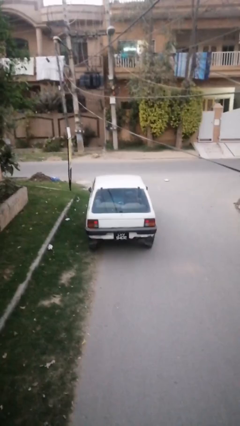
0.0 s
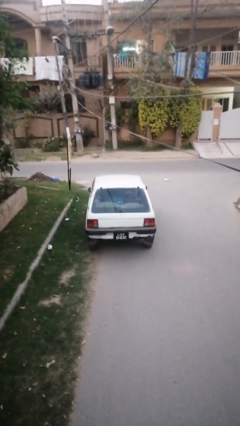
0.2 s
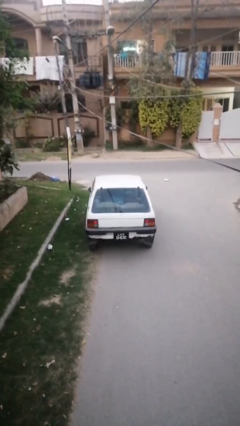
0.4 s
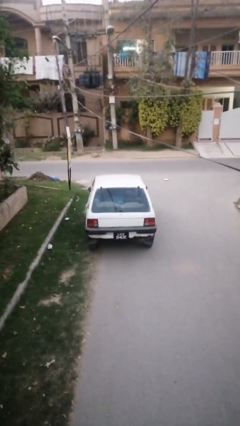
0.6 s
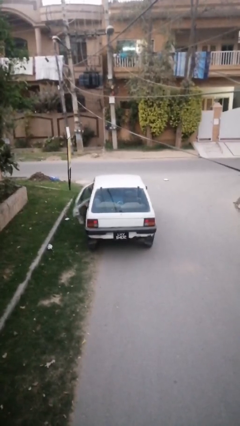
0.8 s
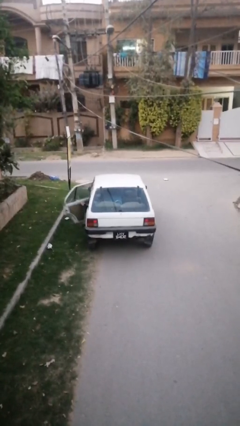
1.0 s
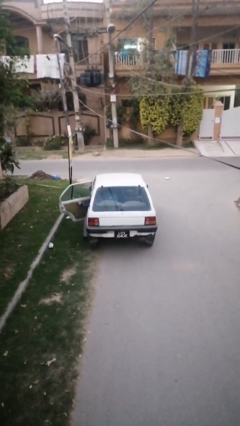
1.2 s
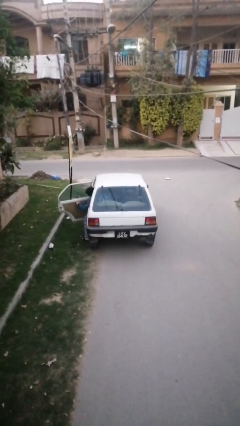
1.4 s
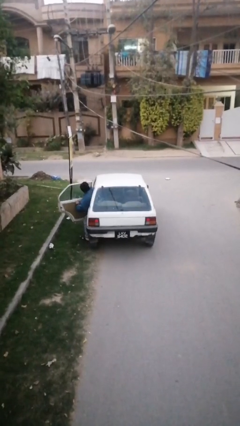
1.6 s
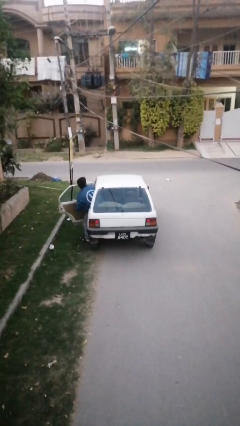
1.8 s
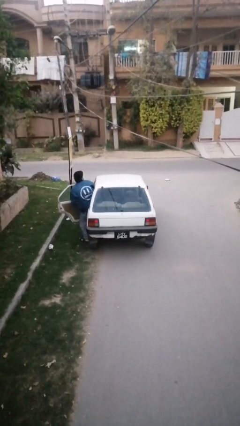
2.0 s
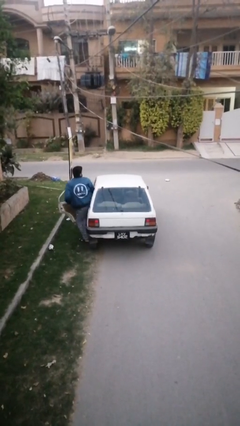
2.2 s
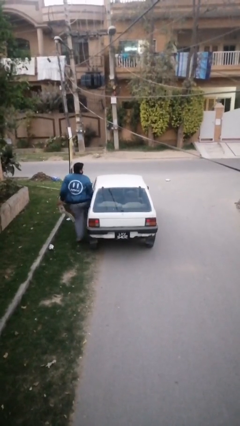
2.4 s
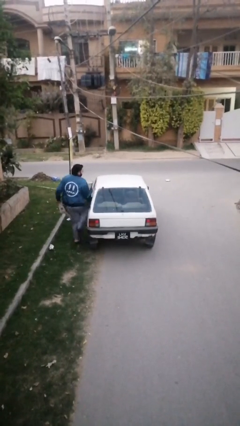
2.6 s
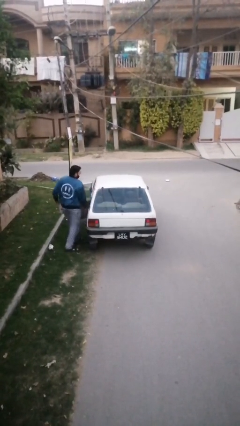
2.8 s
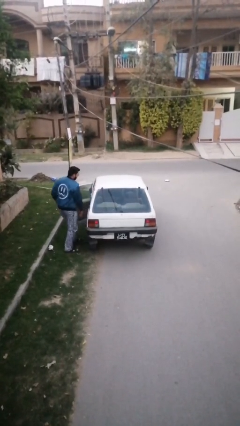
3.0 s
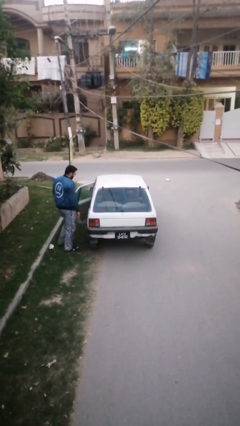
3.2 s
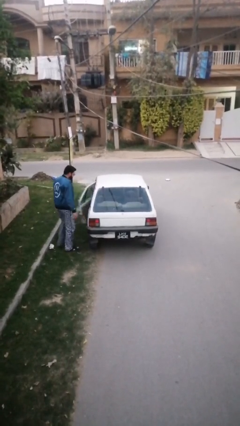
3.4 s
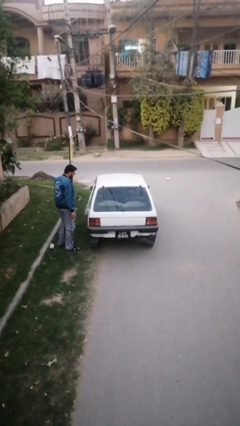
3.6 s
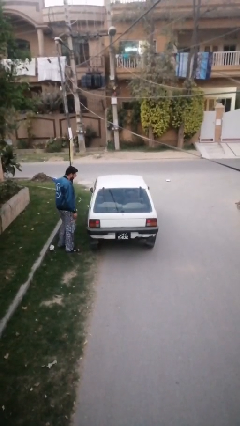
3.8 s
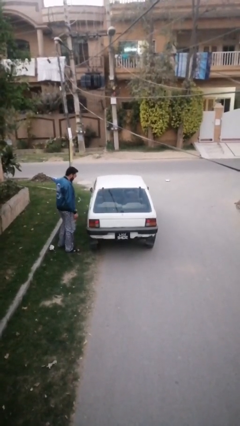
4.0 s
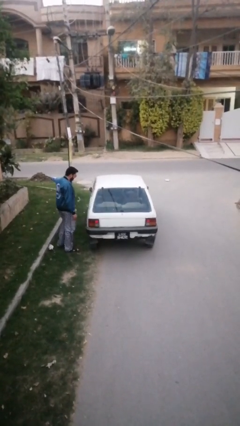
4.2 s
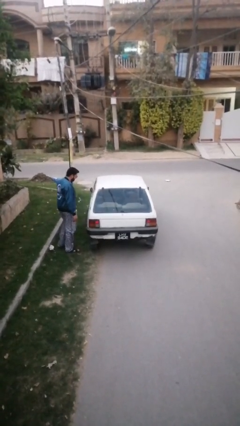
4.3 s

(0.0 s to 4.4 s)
car drops off person

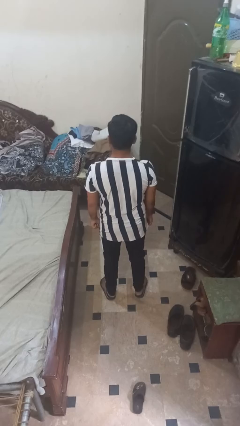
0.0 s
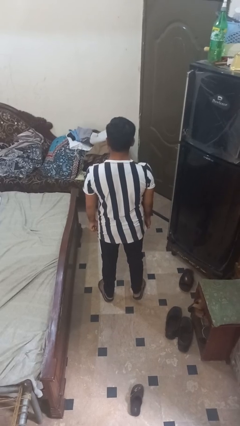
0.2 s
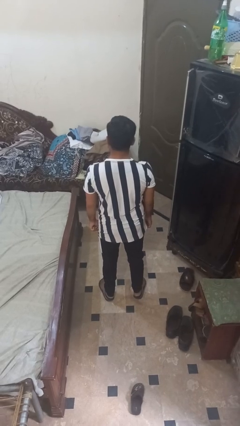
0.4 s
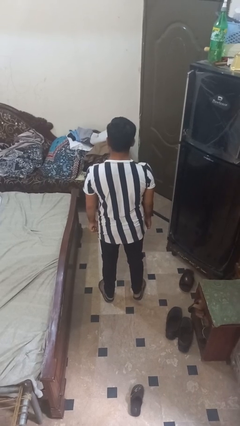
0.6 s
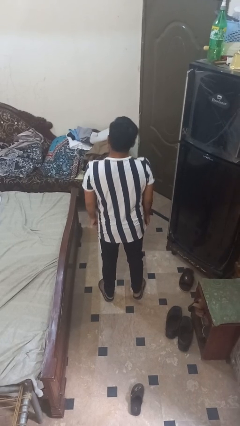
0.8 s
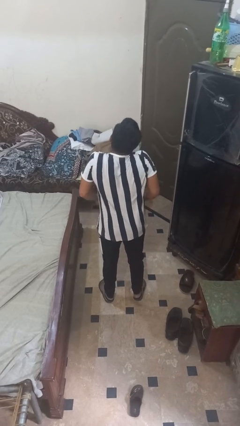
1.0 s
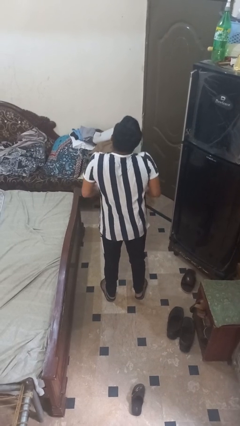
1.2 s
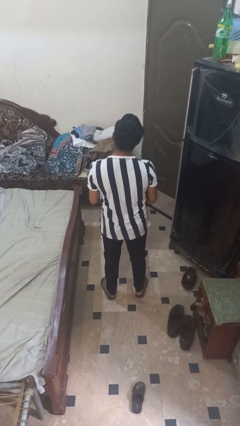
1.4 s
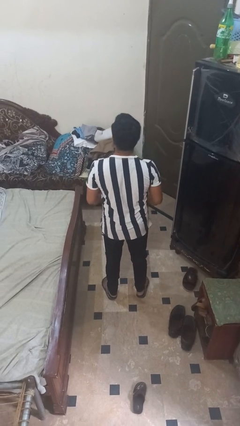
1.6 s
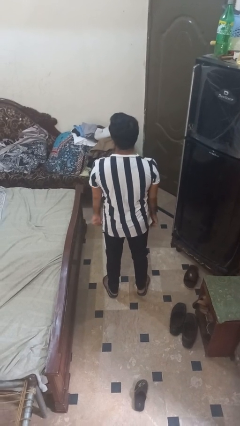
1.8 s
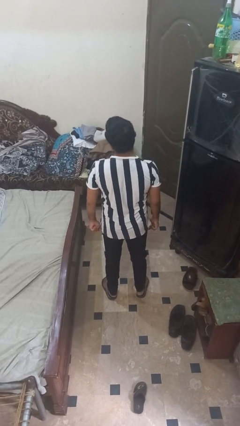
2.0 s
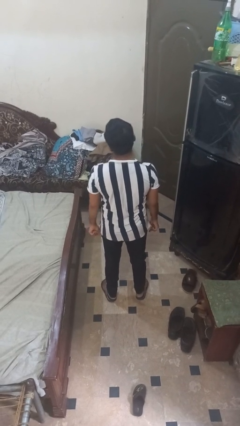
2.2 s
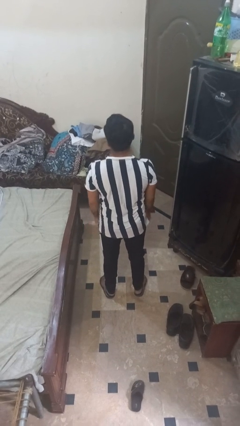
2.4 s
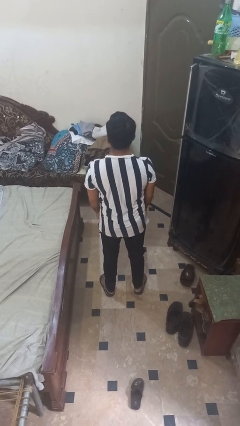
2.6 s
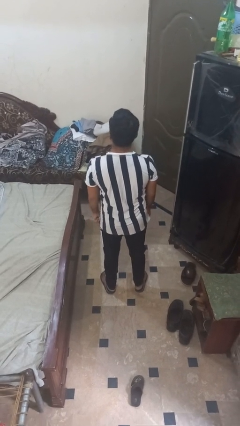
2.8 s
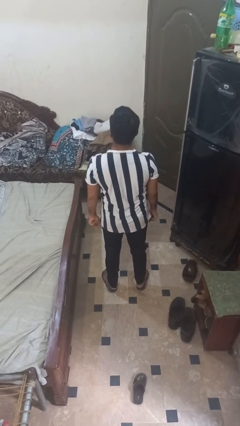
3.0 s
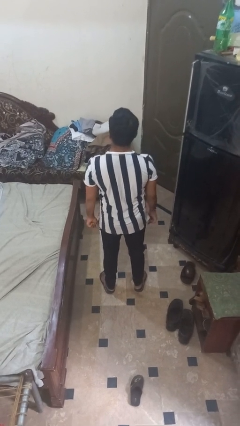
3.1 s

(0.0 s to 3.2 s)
person shrugs

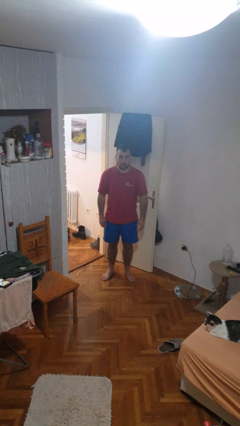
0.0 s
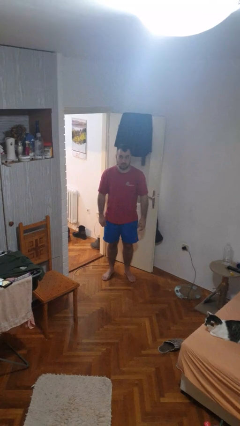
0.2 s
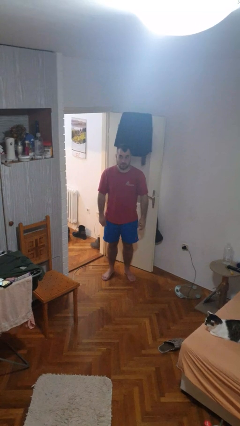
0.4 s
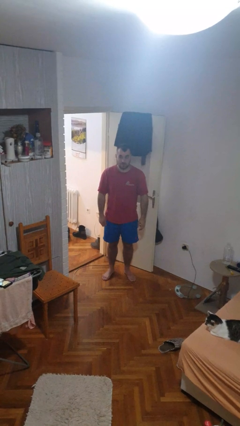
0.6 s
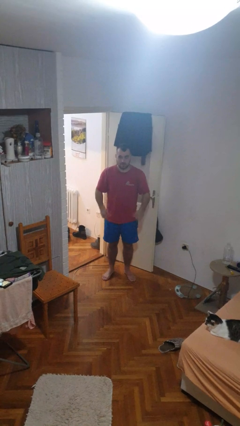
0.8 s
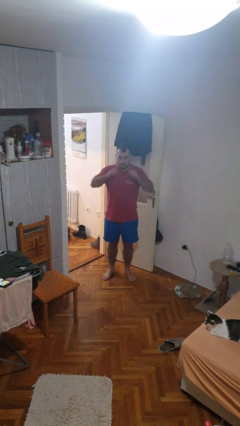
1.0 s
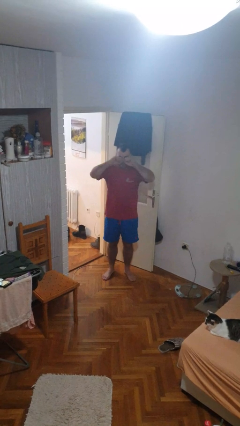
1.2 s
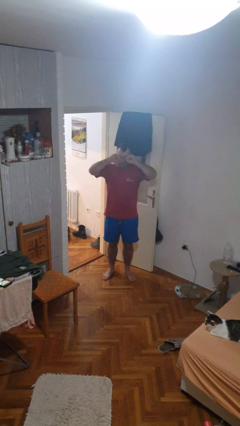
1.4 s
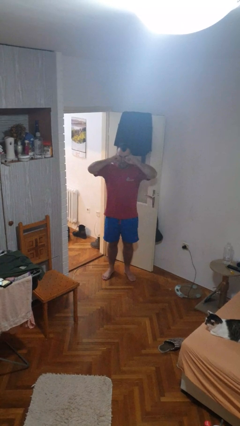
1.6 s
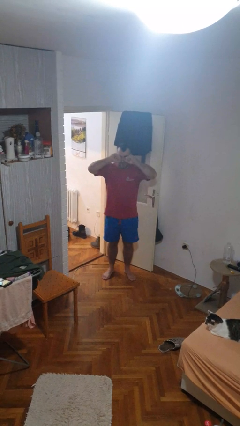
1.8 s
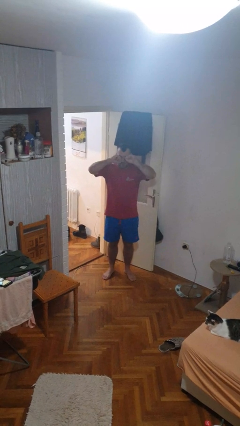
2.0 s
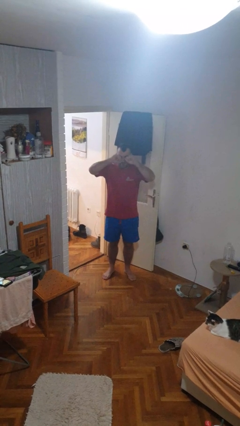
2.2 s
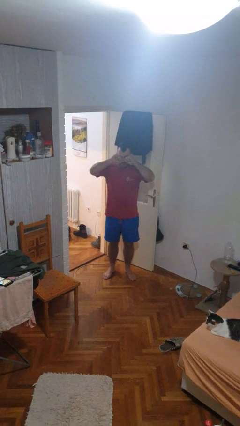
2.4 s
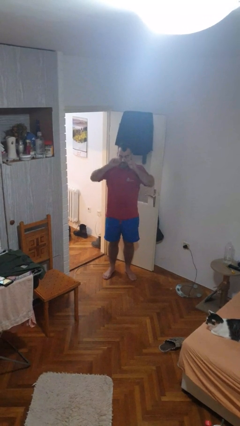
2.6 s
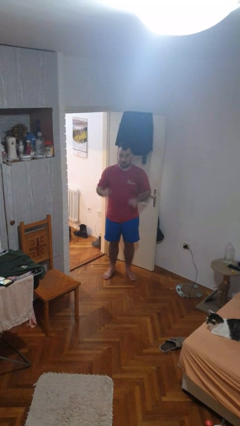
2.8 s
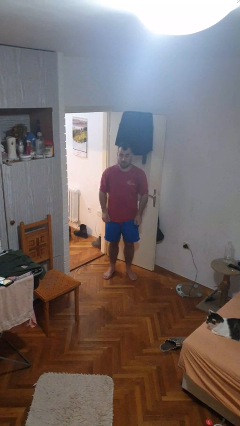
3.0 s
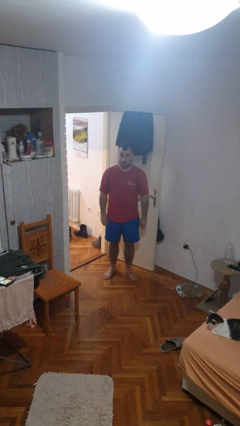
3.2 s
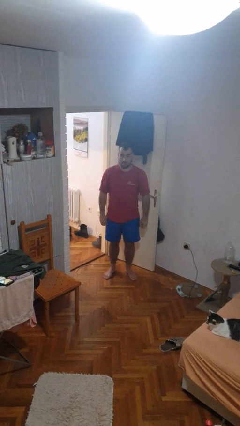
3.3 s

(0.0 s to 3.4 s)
person rubs eyes

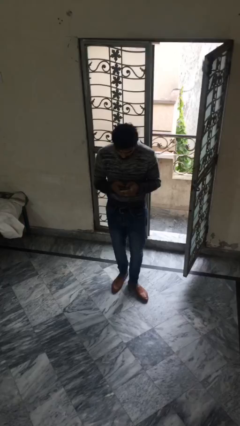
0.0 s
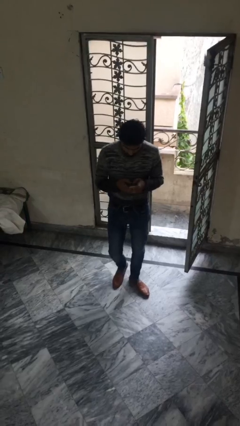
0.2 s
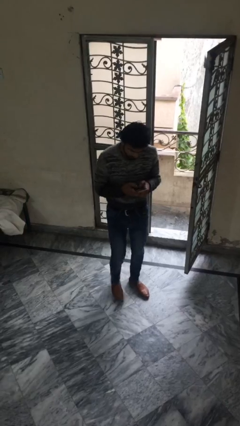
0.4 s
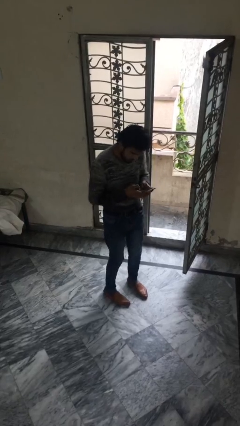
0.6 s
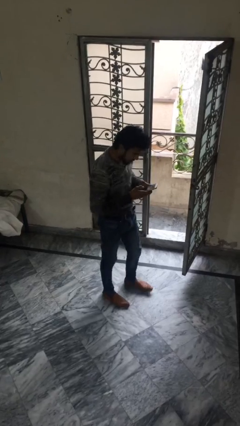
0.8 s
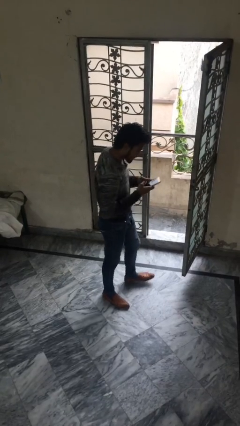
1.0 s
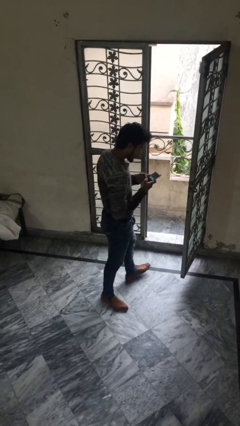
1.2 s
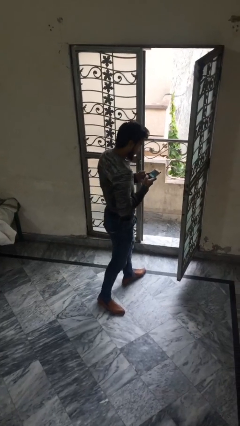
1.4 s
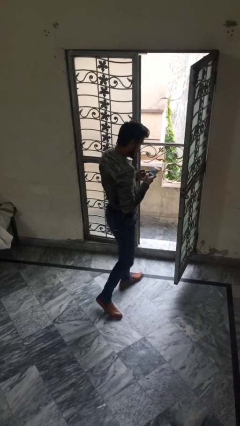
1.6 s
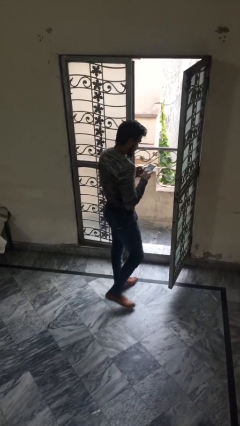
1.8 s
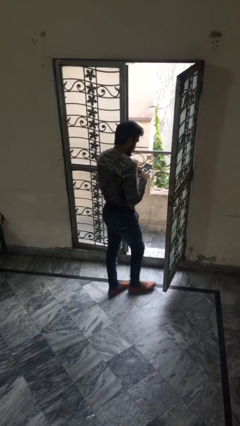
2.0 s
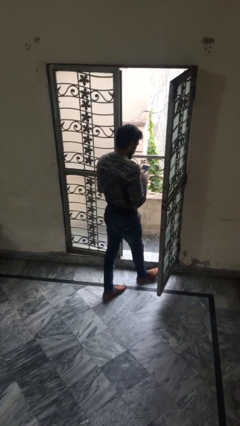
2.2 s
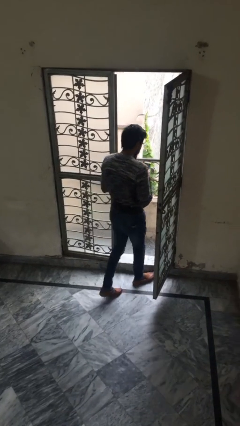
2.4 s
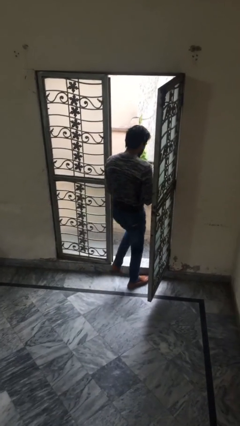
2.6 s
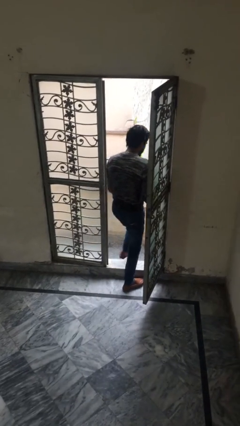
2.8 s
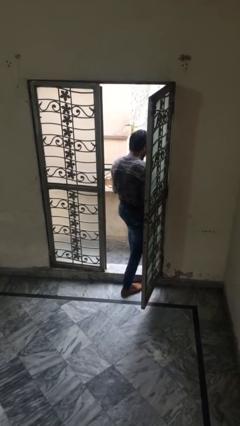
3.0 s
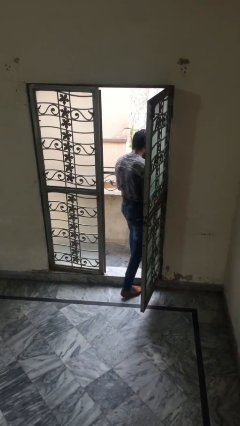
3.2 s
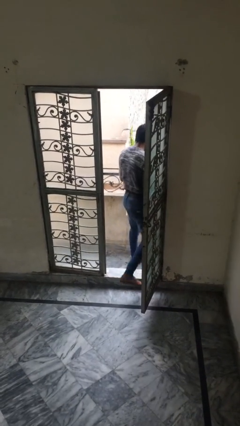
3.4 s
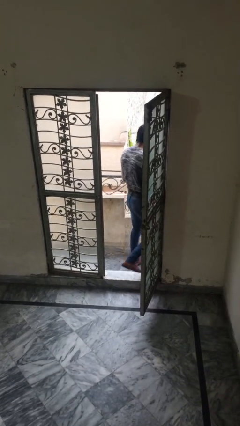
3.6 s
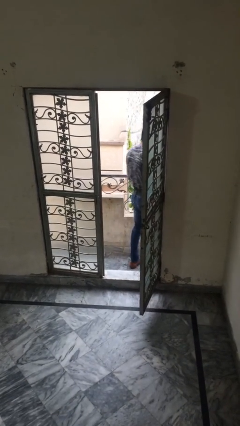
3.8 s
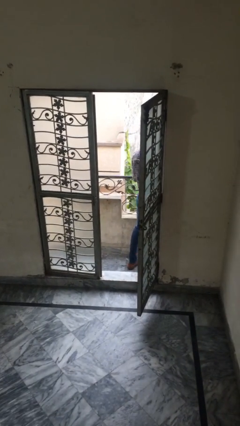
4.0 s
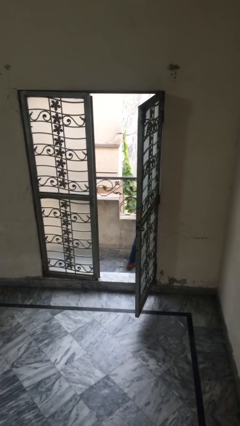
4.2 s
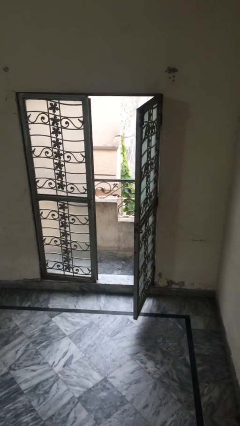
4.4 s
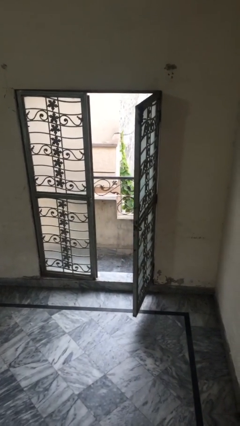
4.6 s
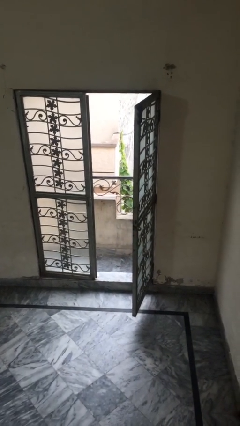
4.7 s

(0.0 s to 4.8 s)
person exits scene through structure

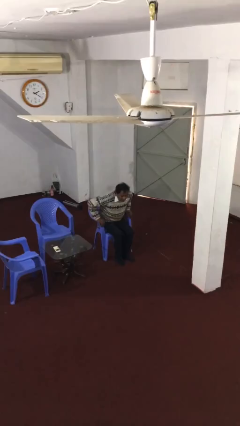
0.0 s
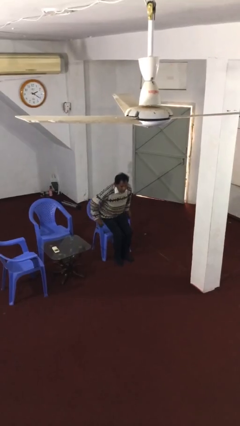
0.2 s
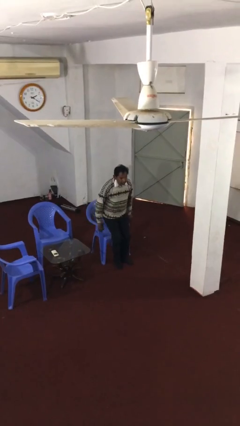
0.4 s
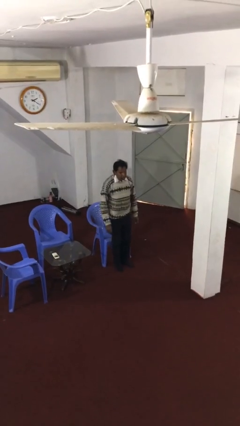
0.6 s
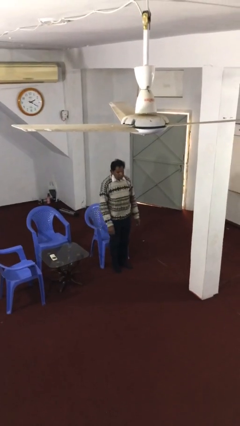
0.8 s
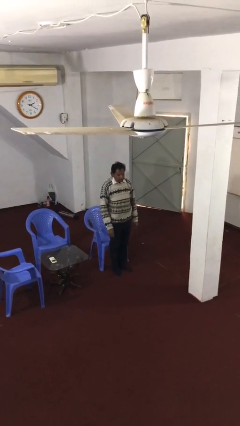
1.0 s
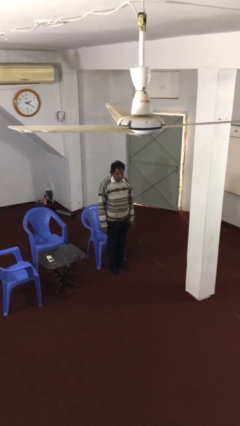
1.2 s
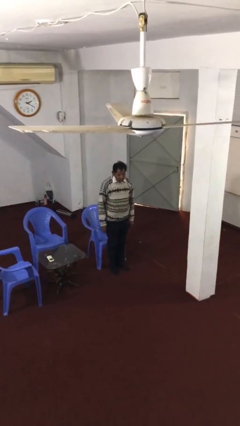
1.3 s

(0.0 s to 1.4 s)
person stands up

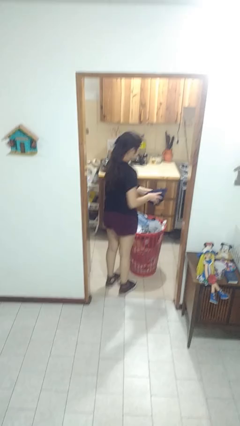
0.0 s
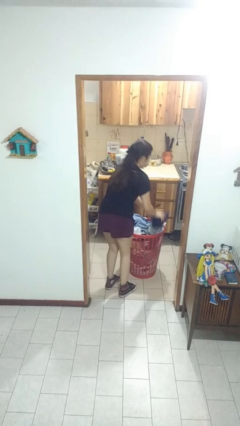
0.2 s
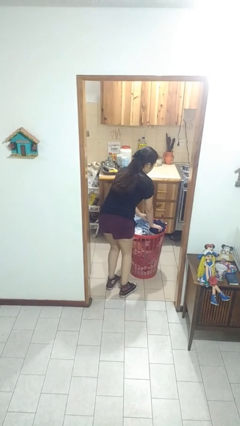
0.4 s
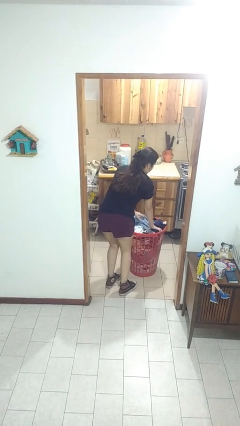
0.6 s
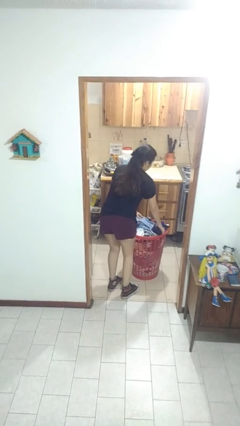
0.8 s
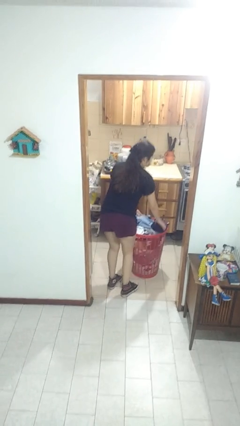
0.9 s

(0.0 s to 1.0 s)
person puts object into basket
